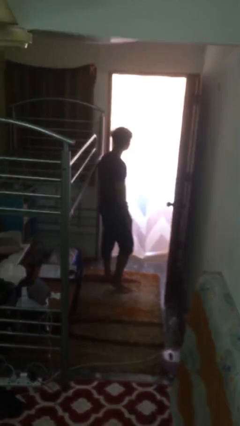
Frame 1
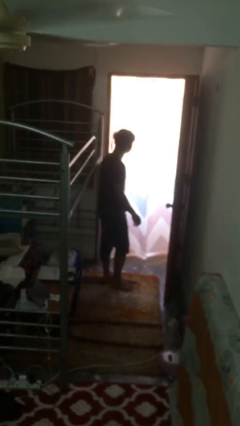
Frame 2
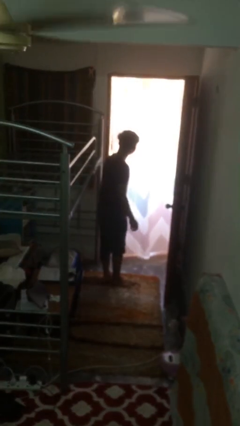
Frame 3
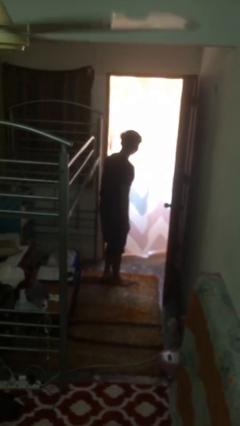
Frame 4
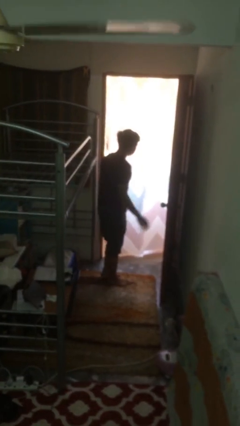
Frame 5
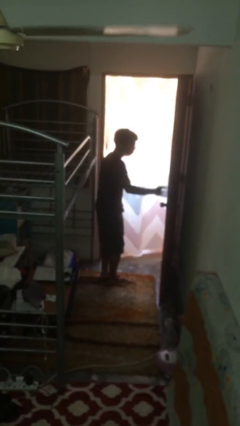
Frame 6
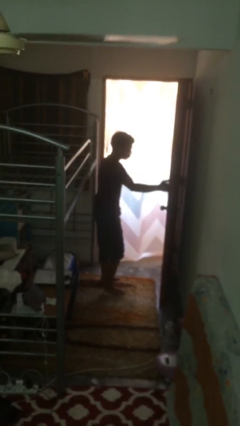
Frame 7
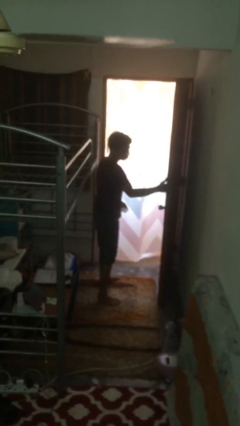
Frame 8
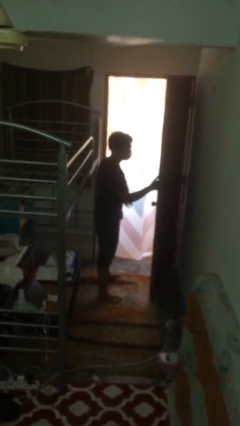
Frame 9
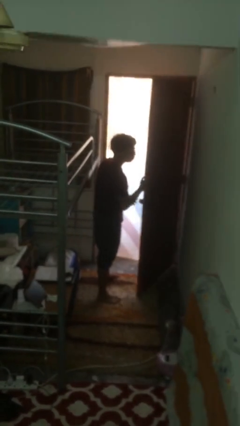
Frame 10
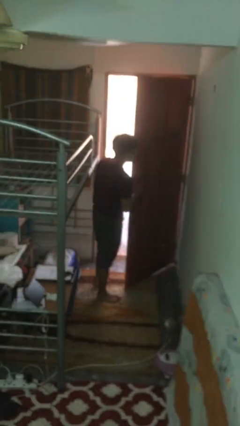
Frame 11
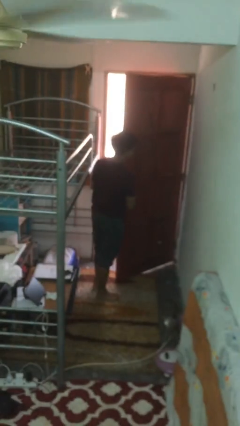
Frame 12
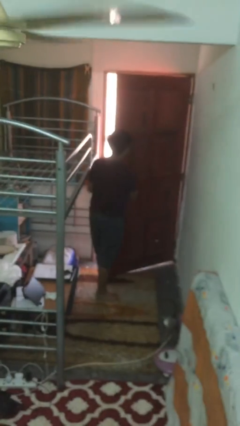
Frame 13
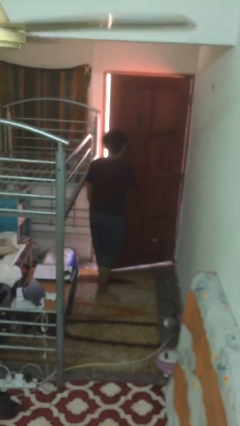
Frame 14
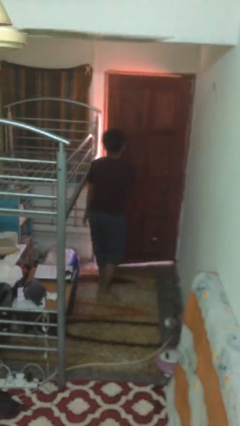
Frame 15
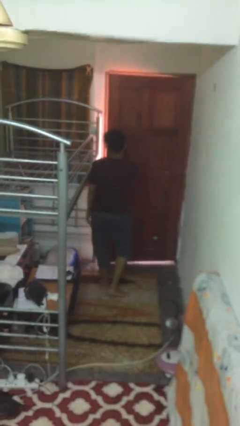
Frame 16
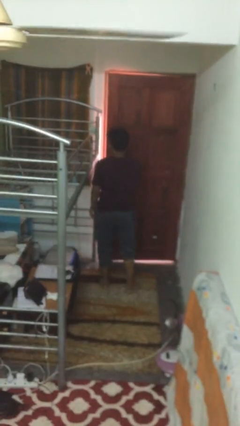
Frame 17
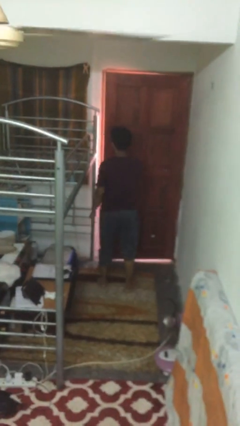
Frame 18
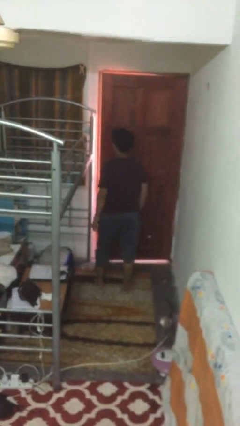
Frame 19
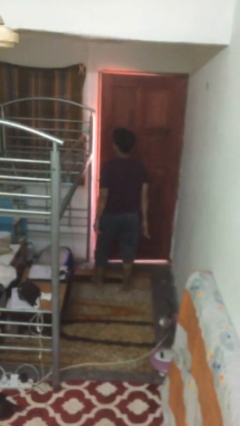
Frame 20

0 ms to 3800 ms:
person closes facility door

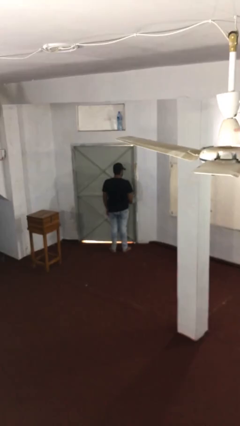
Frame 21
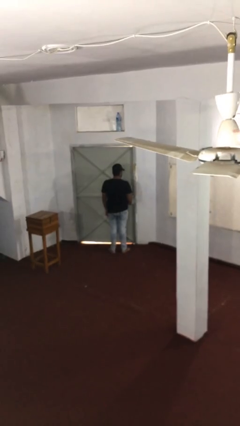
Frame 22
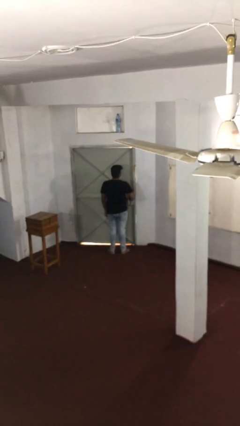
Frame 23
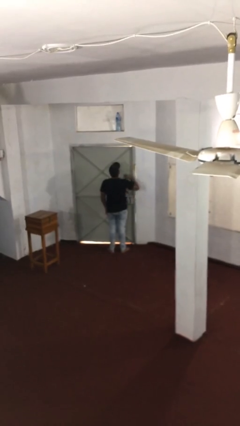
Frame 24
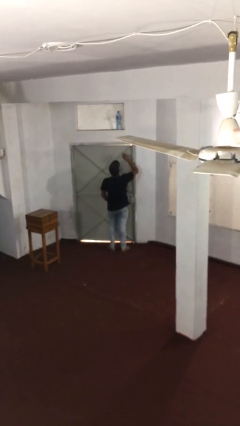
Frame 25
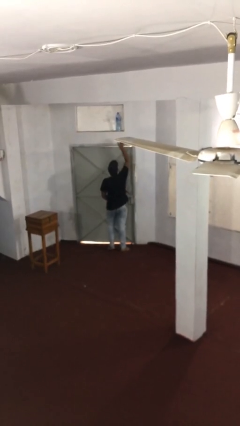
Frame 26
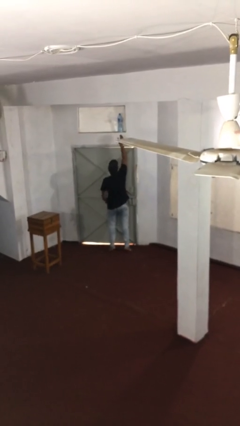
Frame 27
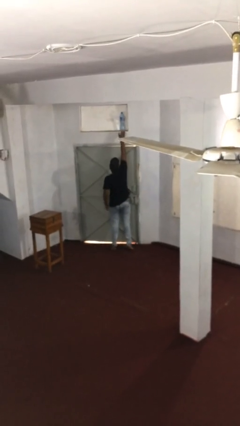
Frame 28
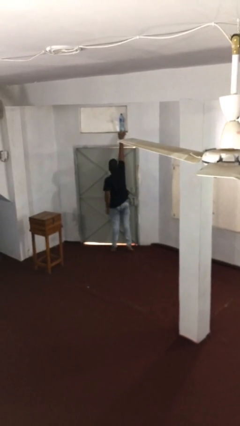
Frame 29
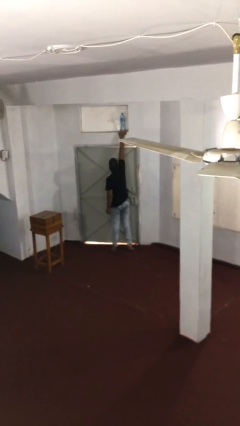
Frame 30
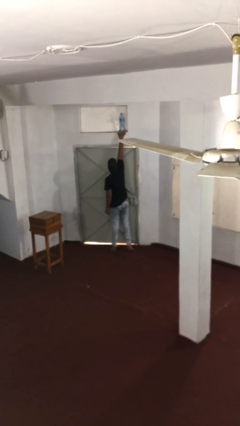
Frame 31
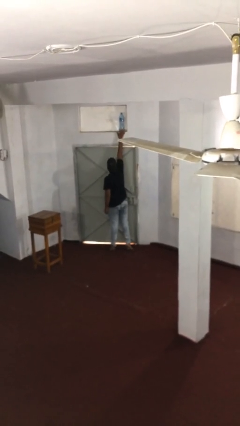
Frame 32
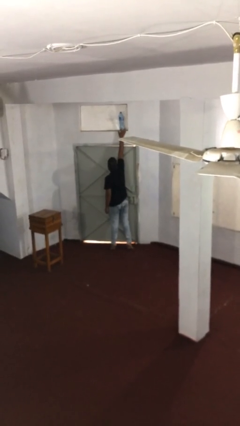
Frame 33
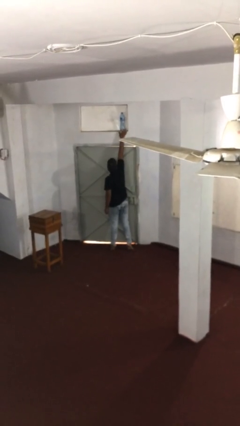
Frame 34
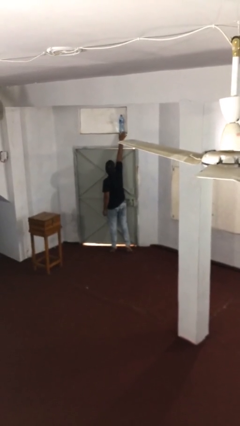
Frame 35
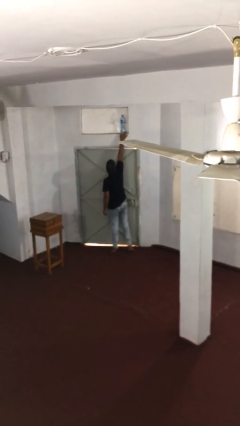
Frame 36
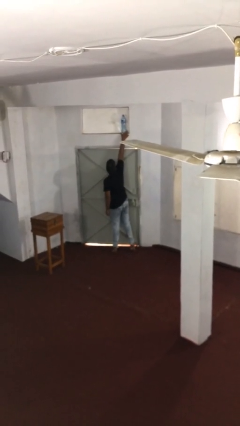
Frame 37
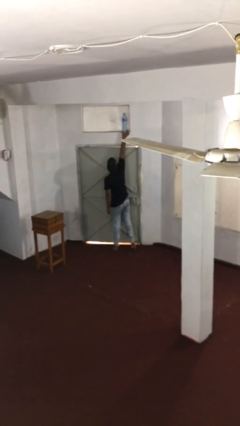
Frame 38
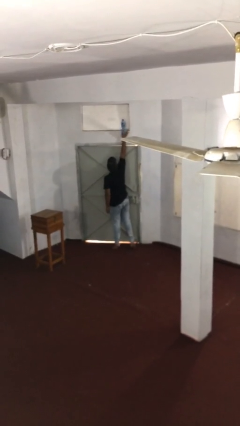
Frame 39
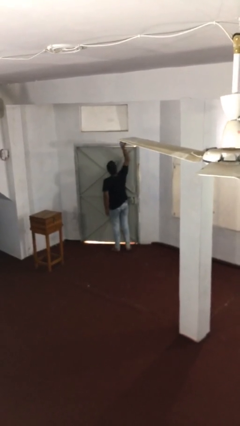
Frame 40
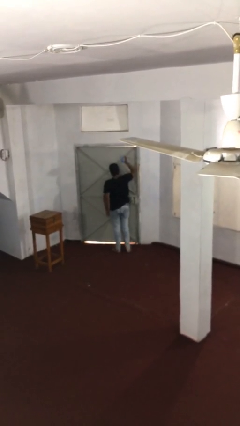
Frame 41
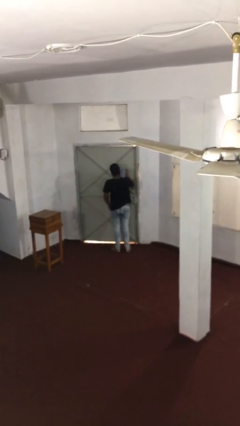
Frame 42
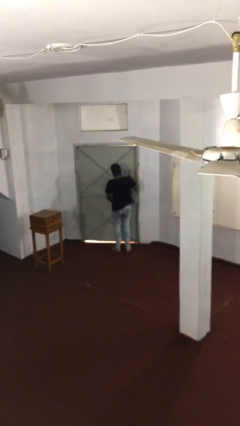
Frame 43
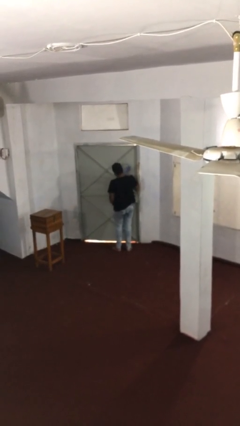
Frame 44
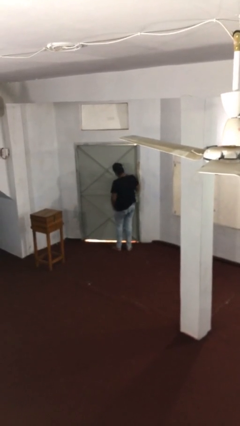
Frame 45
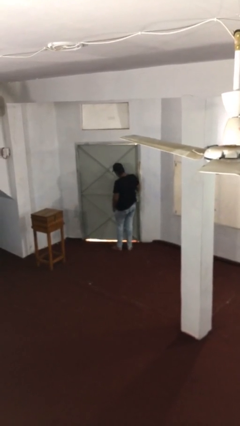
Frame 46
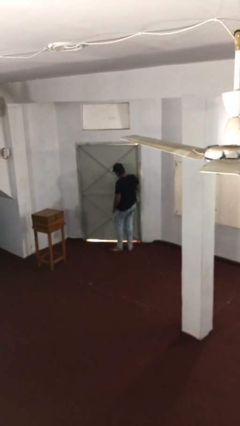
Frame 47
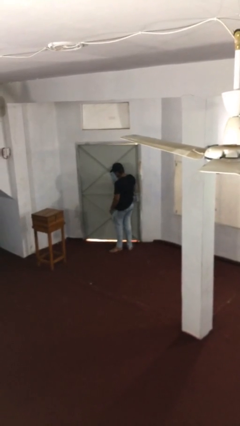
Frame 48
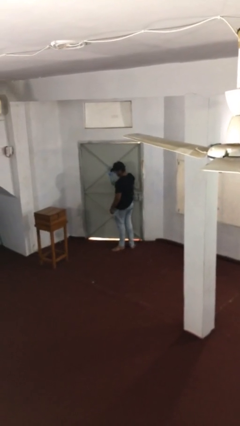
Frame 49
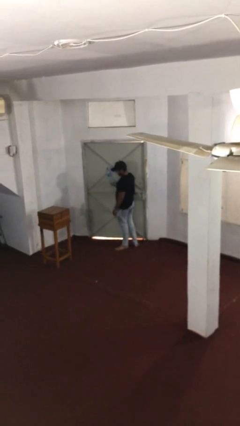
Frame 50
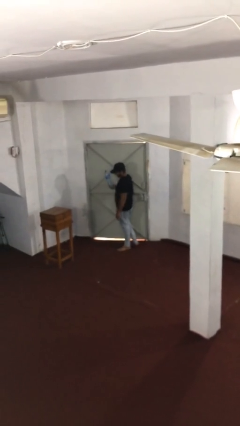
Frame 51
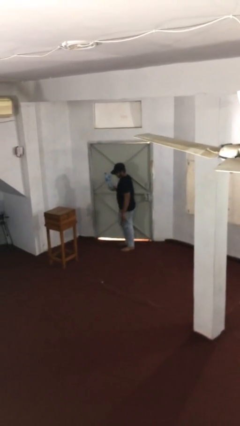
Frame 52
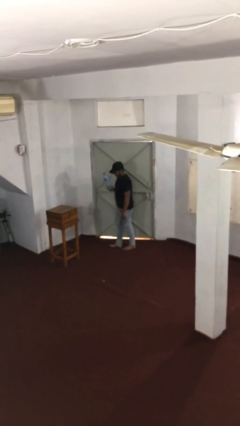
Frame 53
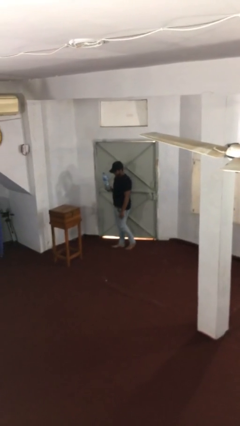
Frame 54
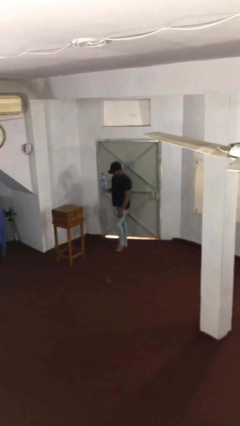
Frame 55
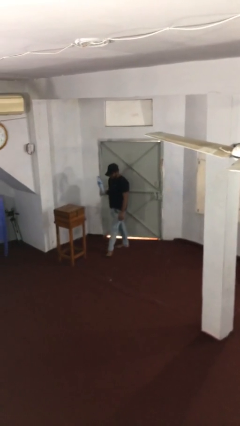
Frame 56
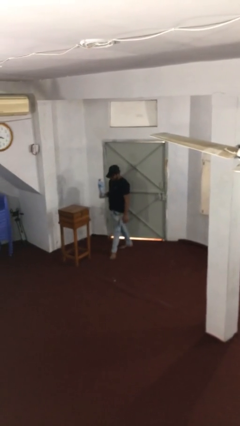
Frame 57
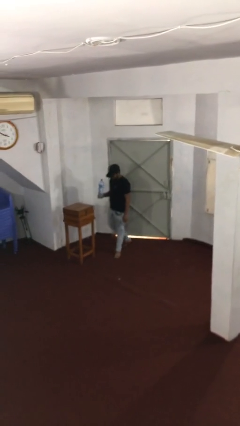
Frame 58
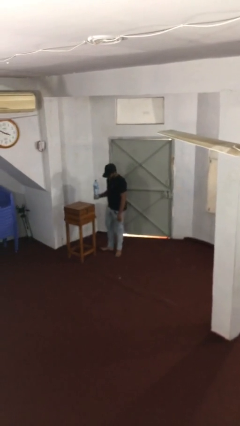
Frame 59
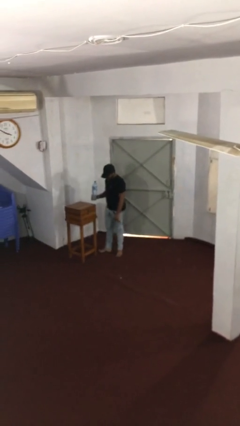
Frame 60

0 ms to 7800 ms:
person picks up object from shelf

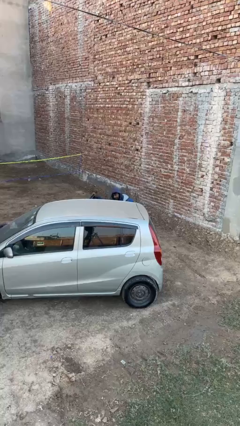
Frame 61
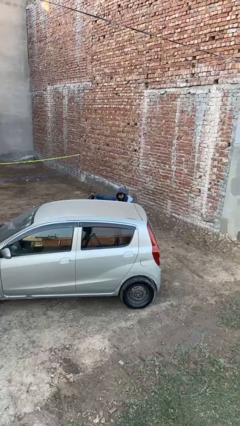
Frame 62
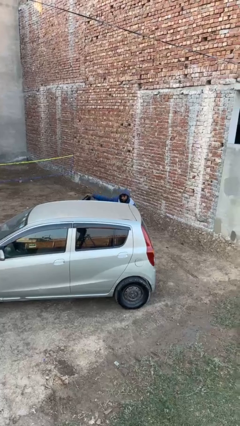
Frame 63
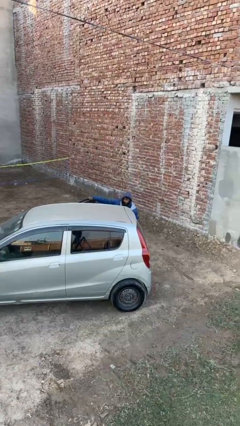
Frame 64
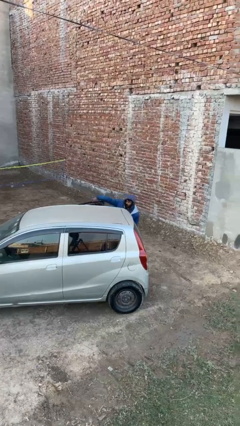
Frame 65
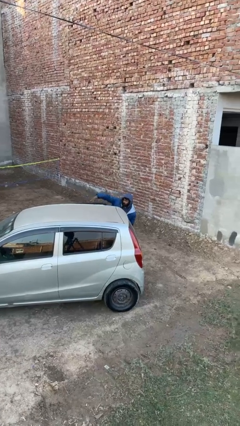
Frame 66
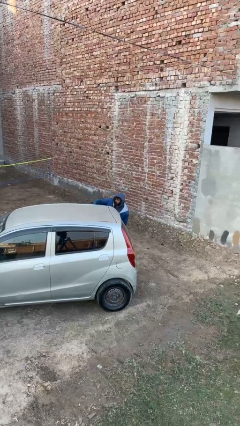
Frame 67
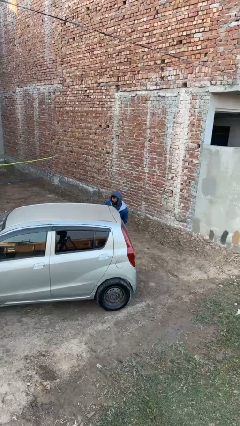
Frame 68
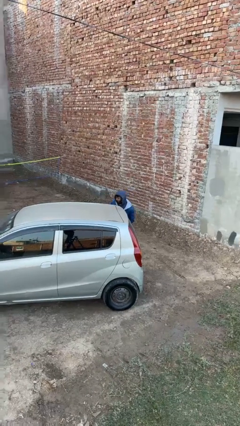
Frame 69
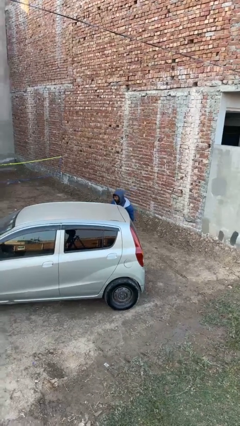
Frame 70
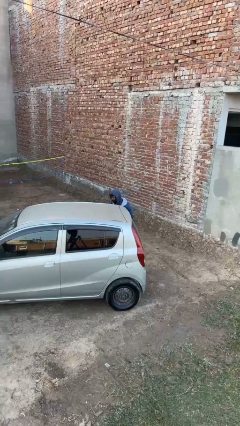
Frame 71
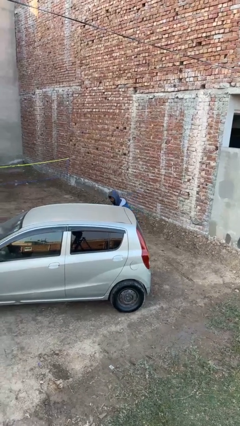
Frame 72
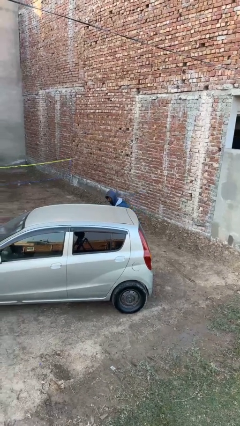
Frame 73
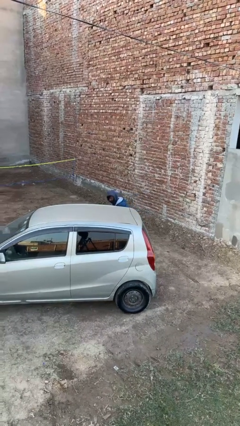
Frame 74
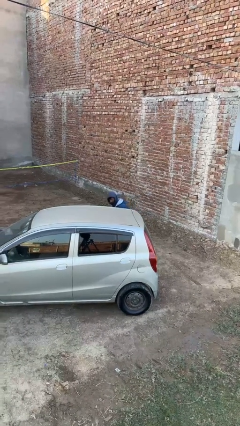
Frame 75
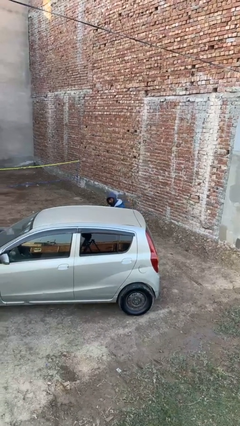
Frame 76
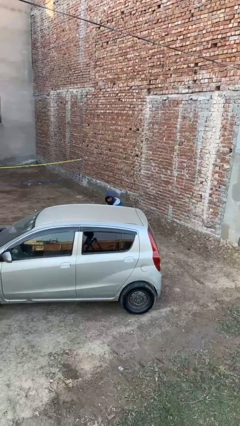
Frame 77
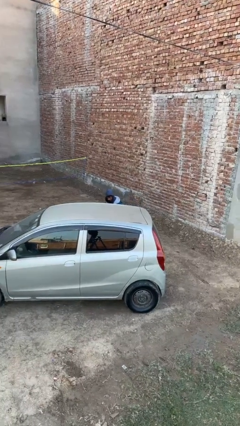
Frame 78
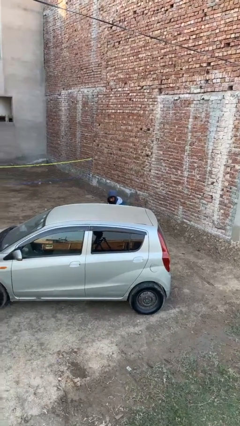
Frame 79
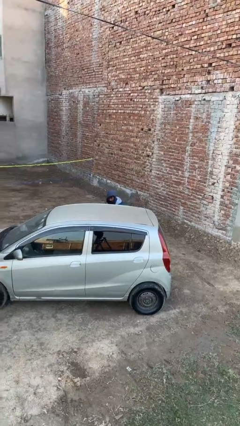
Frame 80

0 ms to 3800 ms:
person closes car door

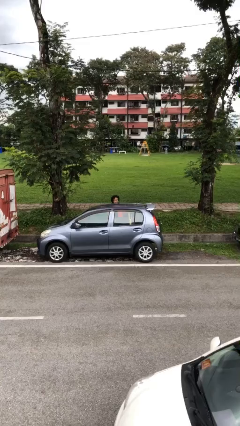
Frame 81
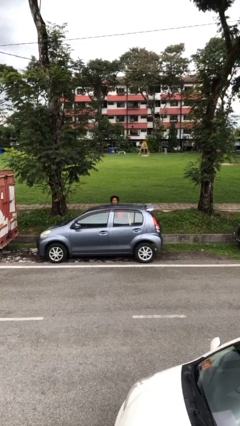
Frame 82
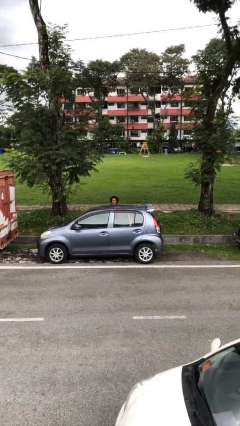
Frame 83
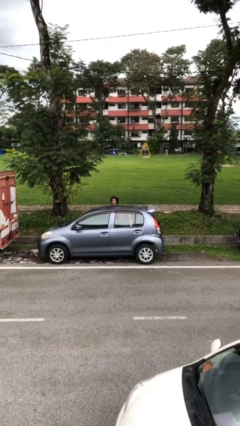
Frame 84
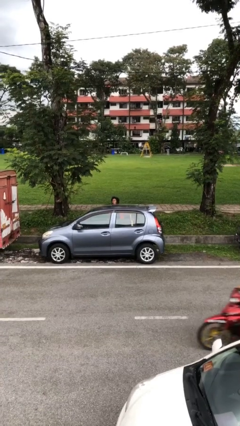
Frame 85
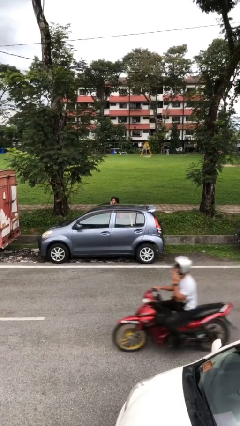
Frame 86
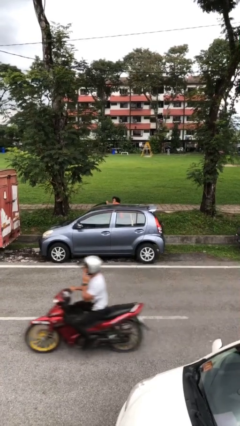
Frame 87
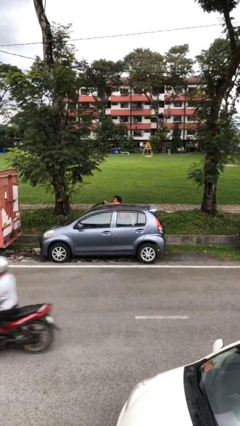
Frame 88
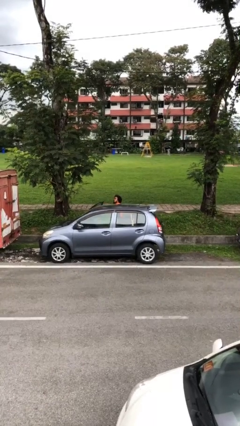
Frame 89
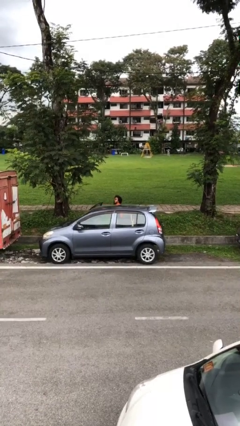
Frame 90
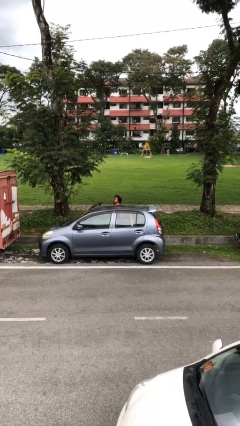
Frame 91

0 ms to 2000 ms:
person opens car door

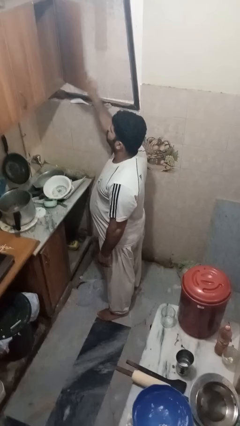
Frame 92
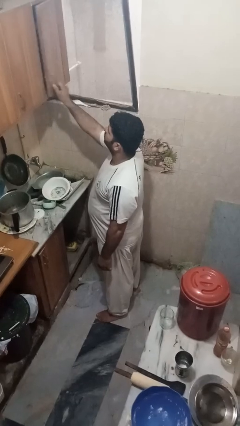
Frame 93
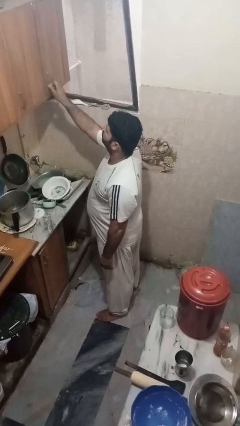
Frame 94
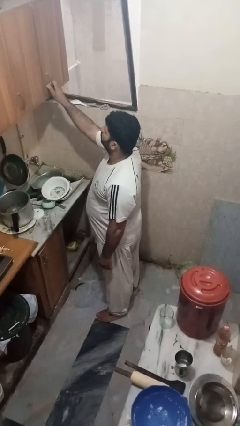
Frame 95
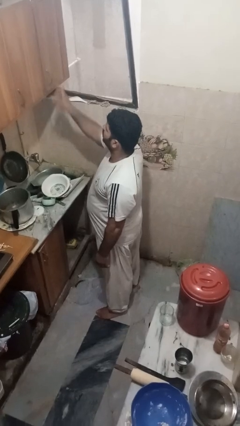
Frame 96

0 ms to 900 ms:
person closes cabinet
